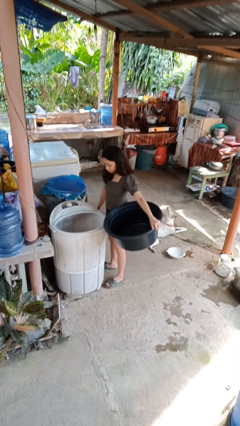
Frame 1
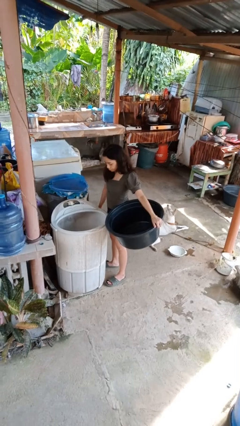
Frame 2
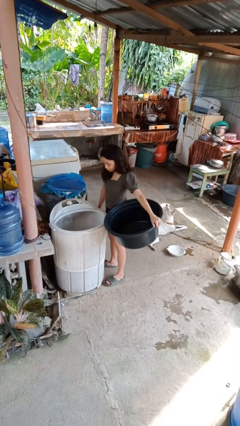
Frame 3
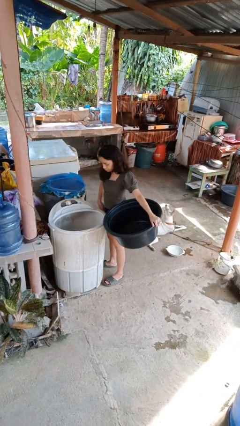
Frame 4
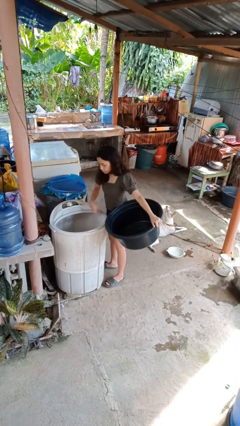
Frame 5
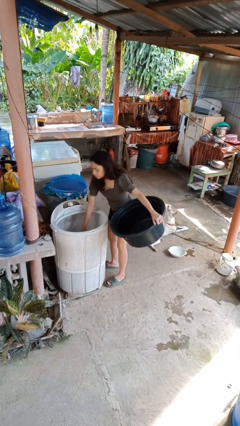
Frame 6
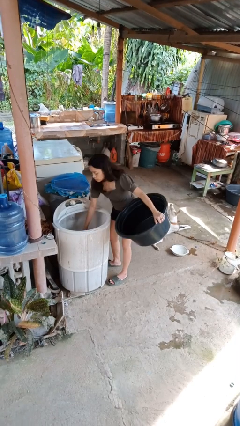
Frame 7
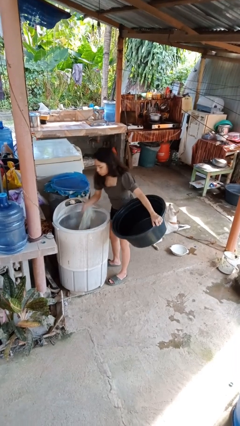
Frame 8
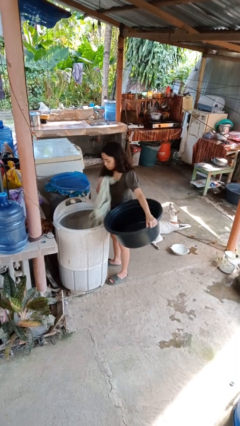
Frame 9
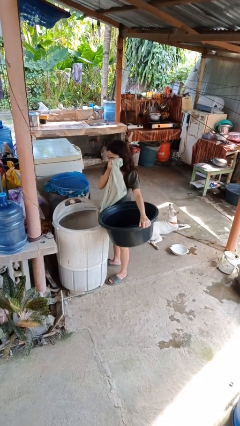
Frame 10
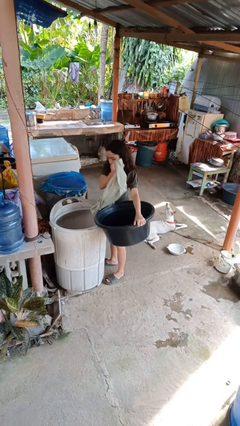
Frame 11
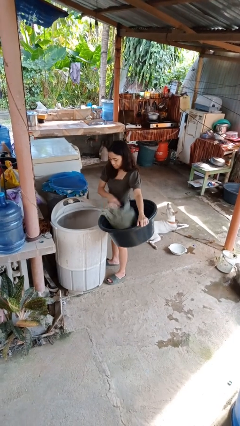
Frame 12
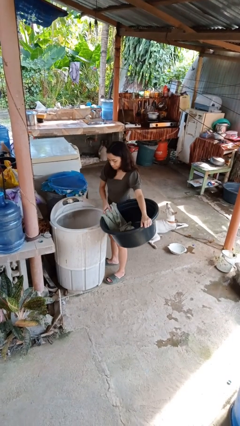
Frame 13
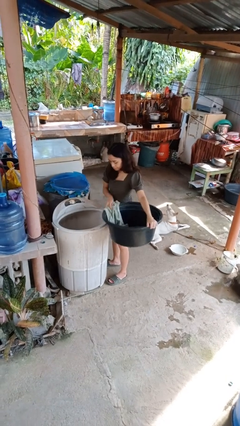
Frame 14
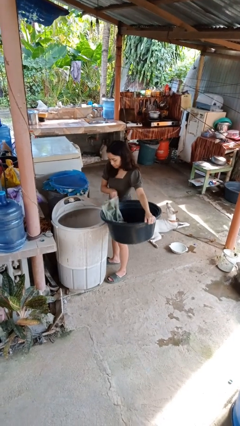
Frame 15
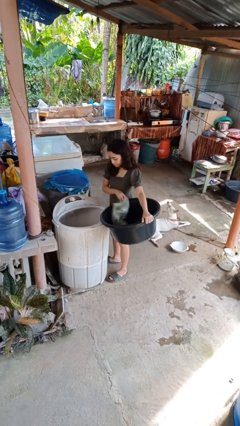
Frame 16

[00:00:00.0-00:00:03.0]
person unloads clotheswasher

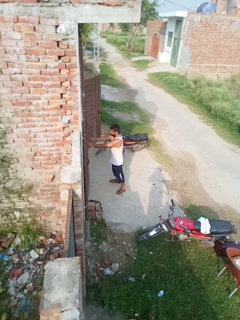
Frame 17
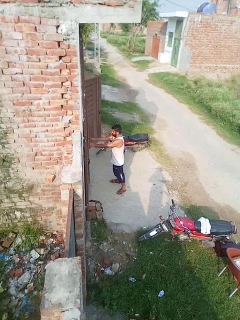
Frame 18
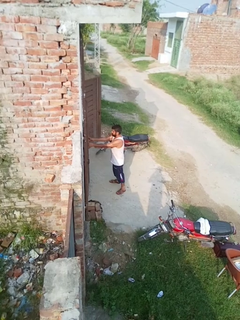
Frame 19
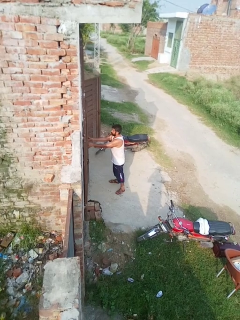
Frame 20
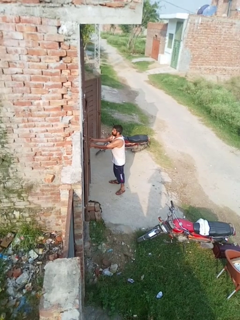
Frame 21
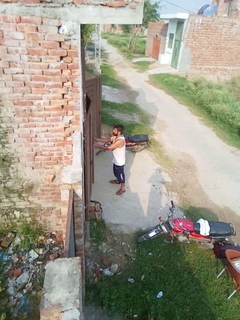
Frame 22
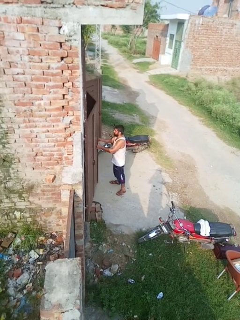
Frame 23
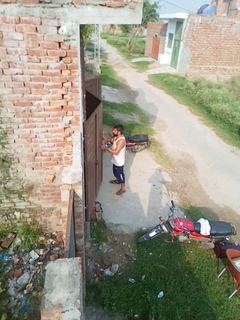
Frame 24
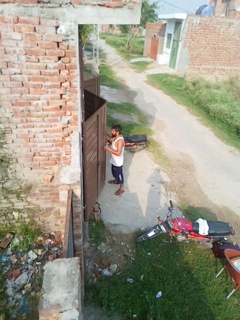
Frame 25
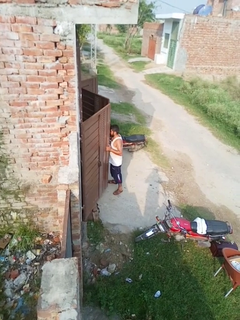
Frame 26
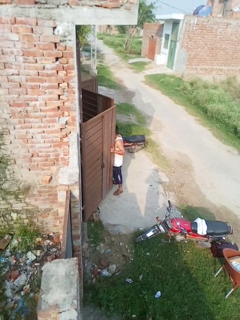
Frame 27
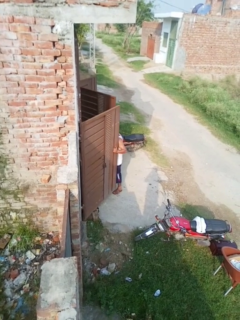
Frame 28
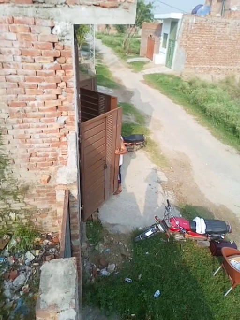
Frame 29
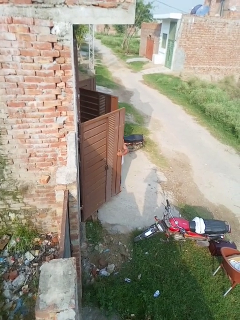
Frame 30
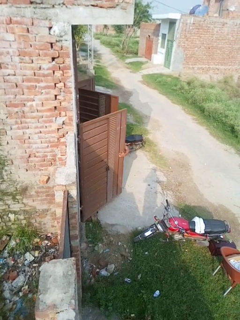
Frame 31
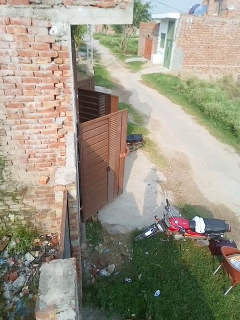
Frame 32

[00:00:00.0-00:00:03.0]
person opens gate

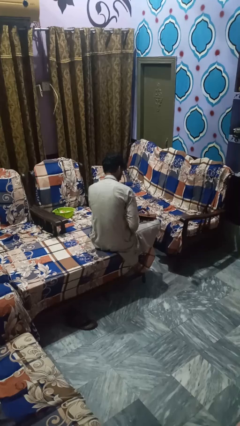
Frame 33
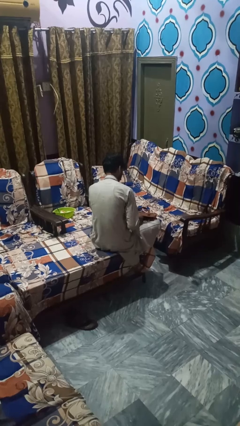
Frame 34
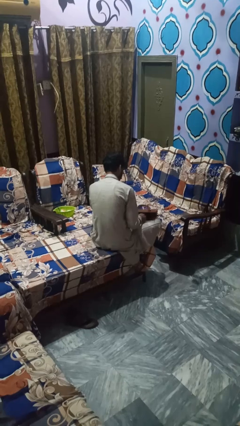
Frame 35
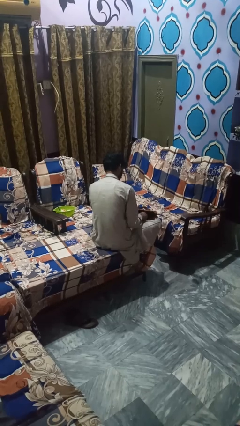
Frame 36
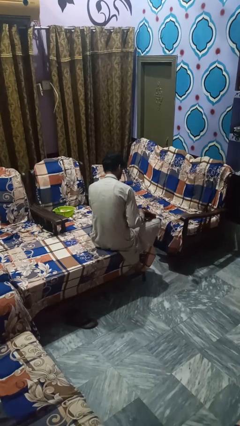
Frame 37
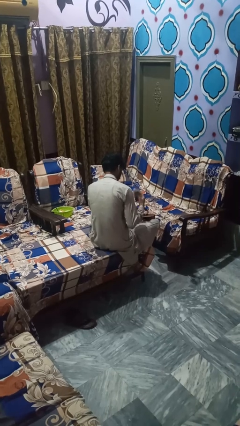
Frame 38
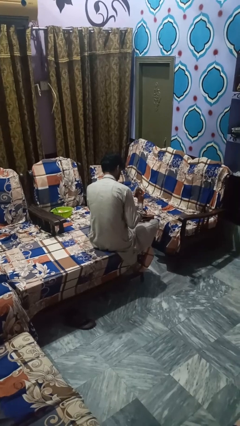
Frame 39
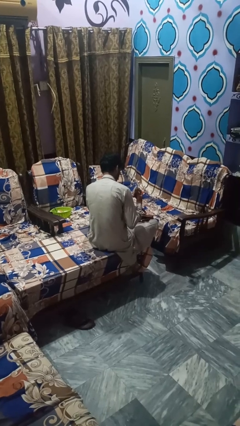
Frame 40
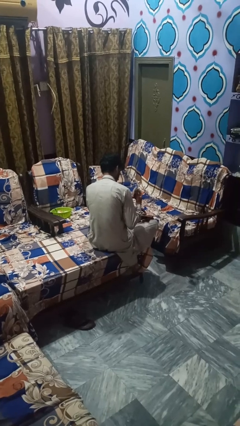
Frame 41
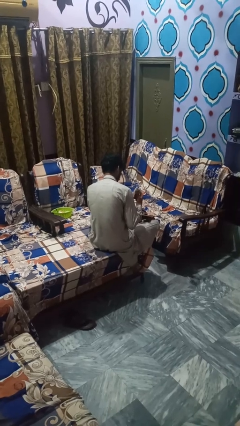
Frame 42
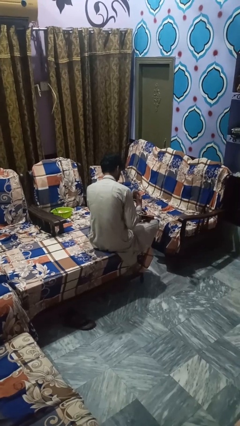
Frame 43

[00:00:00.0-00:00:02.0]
person takes object from bag

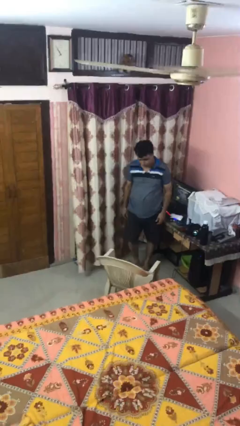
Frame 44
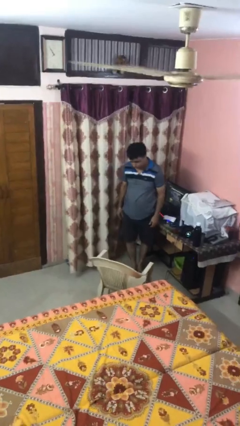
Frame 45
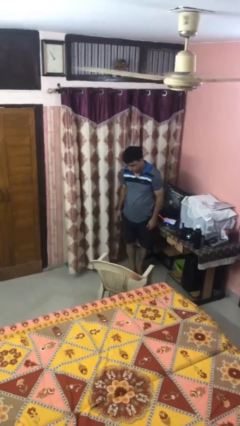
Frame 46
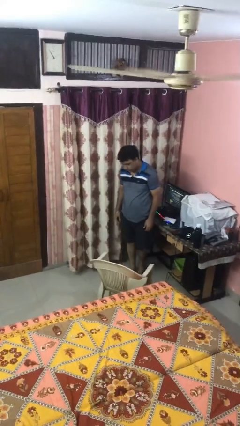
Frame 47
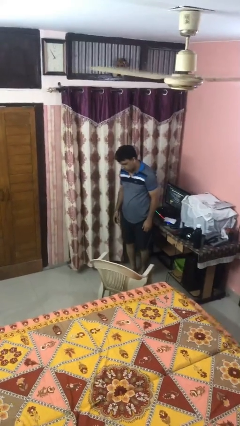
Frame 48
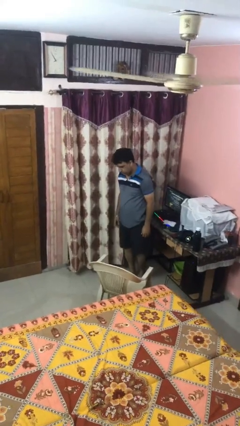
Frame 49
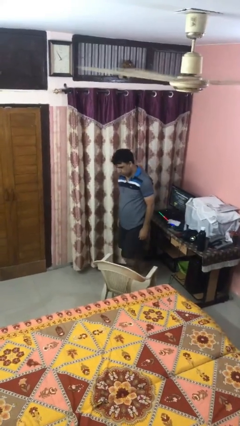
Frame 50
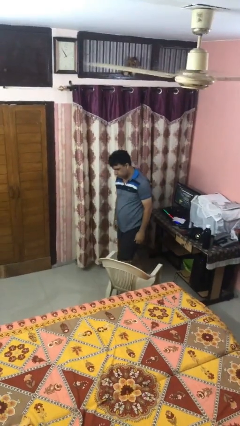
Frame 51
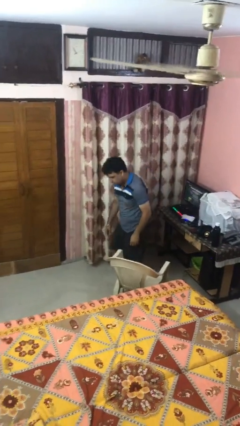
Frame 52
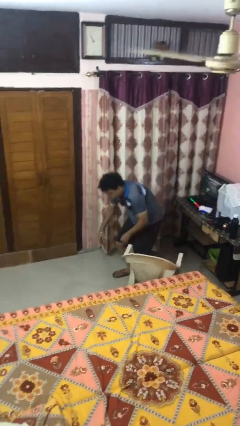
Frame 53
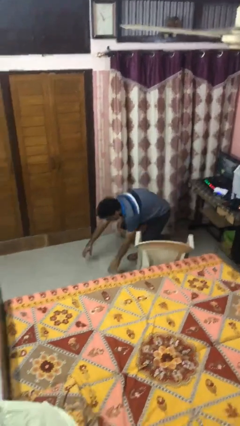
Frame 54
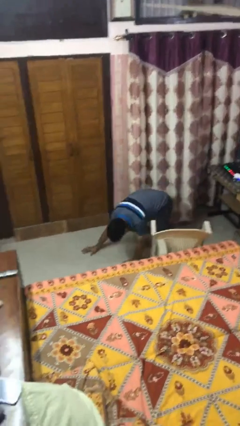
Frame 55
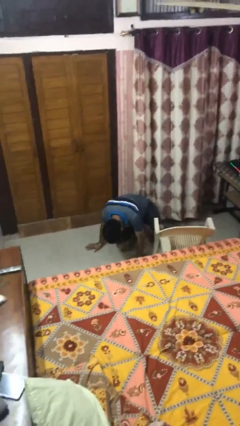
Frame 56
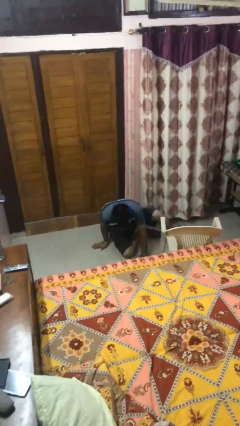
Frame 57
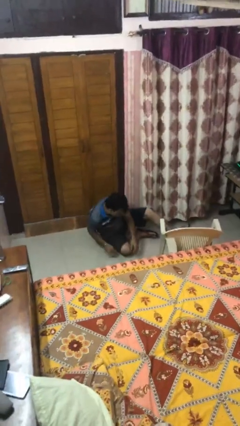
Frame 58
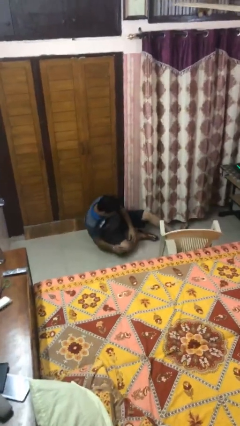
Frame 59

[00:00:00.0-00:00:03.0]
person trips on object on floor

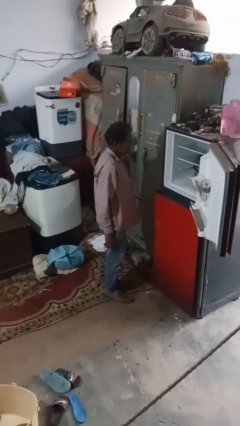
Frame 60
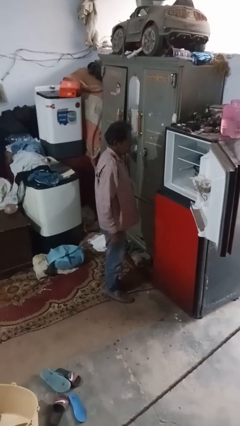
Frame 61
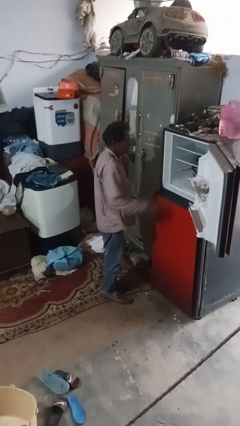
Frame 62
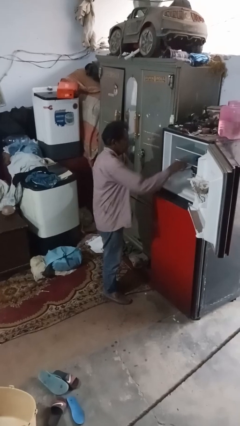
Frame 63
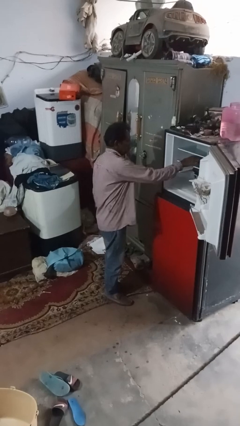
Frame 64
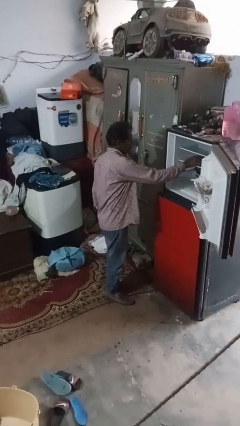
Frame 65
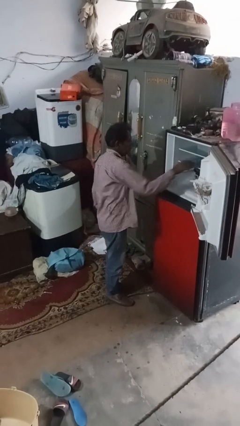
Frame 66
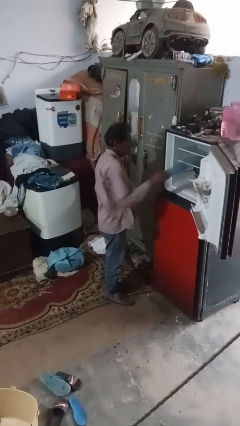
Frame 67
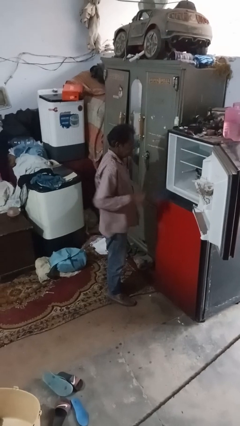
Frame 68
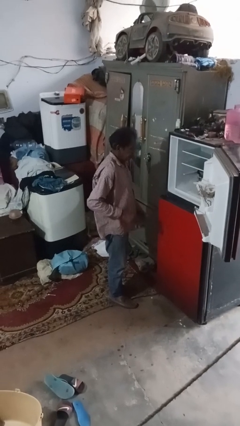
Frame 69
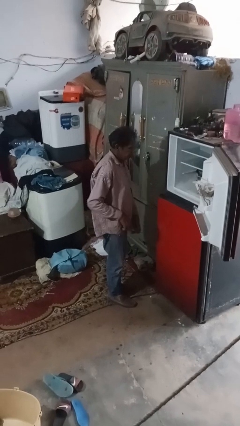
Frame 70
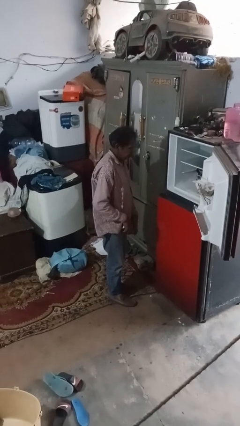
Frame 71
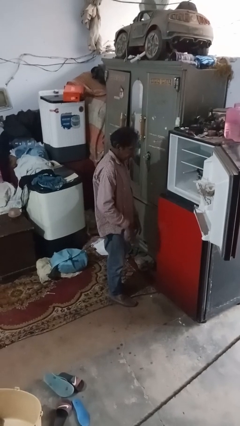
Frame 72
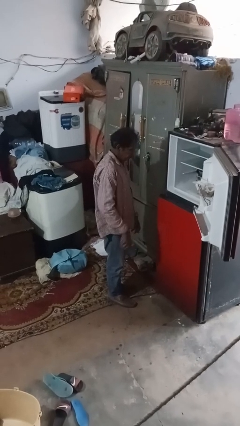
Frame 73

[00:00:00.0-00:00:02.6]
person takes object from refrigerator

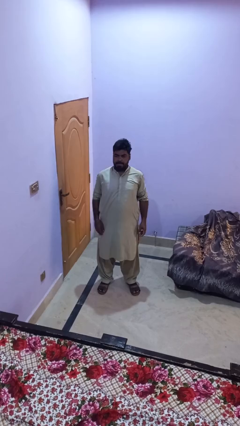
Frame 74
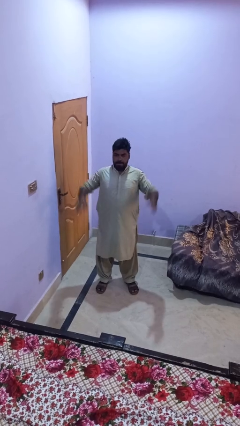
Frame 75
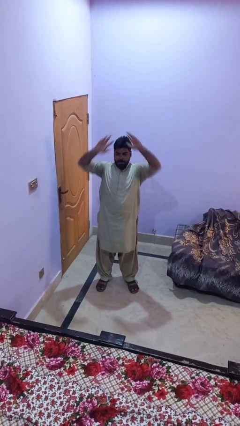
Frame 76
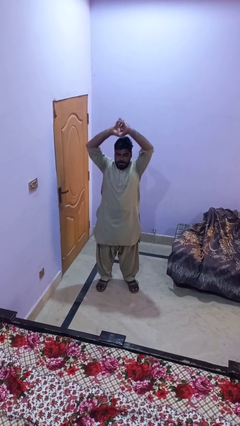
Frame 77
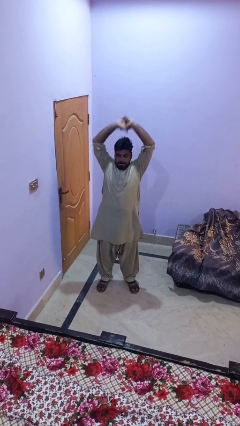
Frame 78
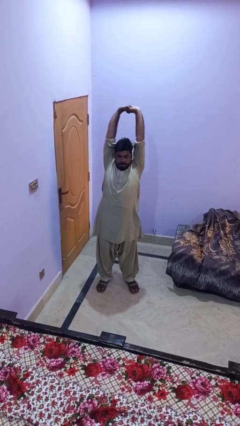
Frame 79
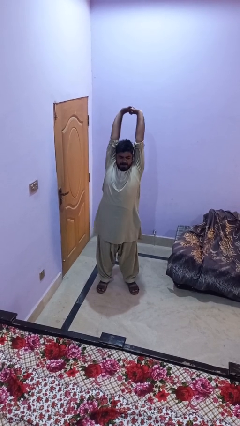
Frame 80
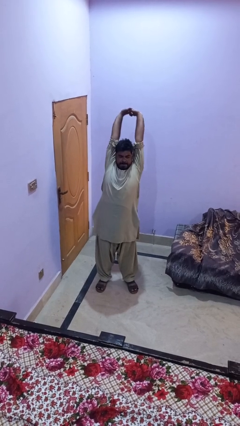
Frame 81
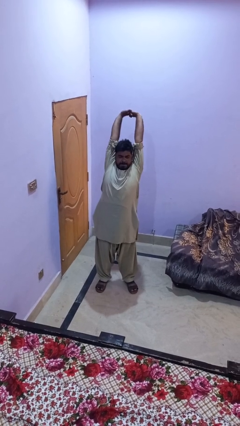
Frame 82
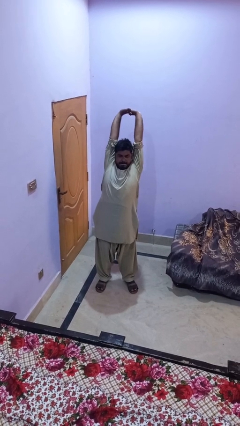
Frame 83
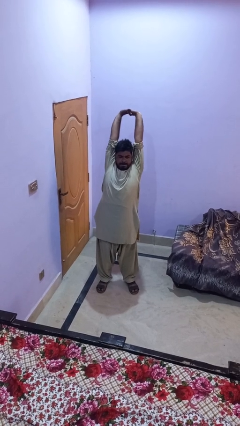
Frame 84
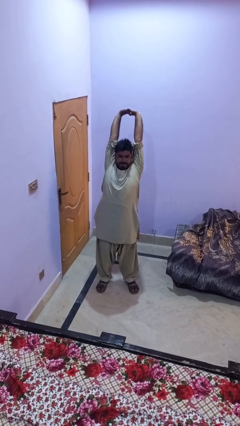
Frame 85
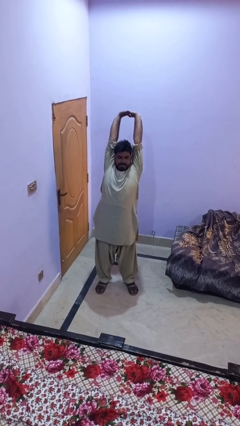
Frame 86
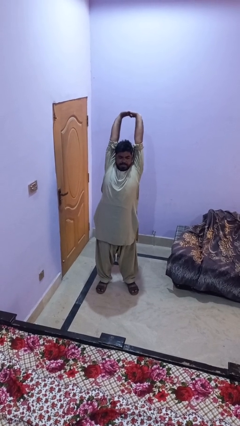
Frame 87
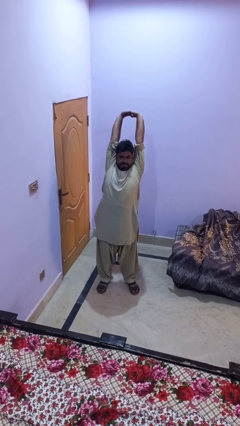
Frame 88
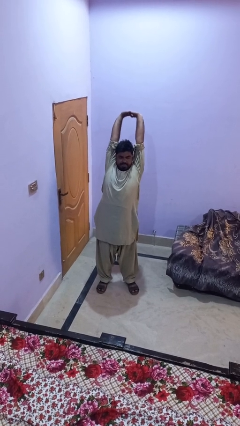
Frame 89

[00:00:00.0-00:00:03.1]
person stretches arms over head

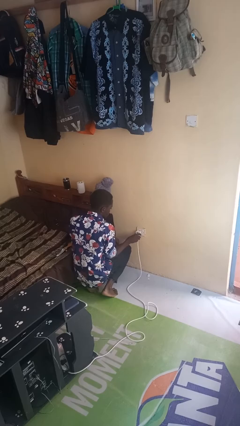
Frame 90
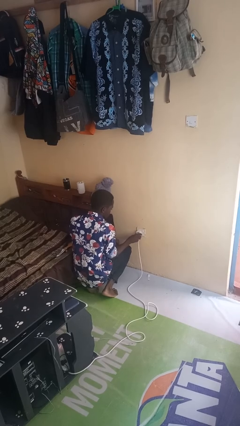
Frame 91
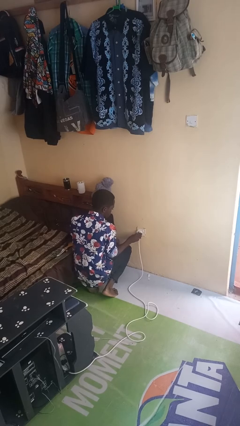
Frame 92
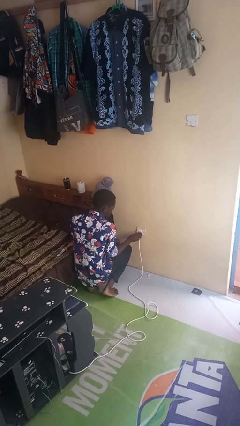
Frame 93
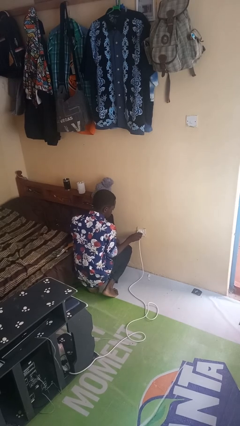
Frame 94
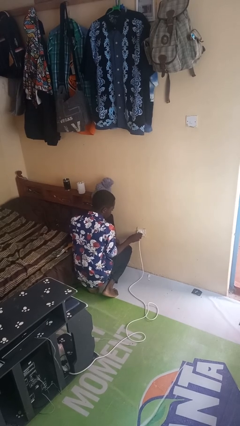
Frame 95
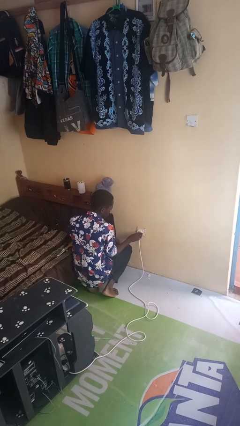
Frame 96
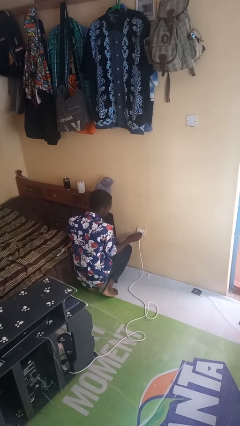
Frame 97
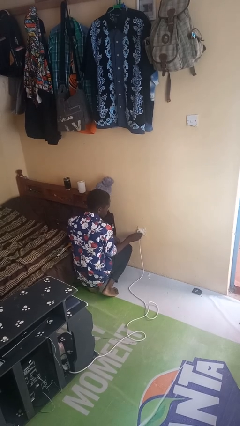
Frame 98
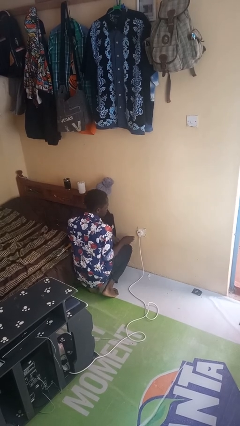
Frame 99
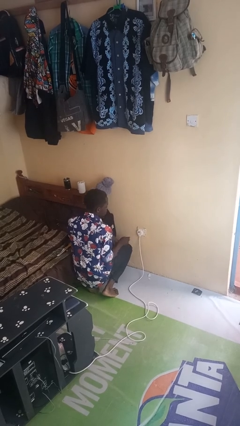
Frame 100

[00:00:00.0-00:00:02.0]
person plugs into electrical socket
